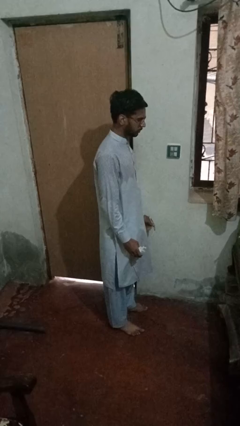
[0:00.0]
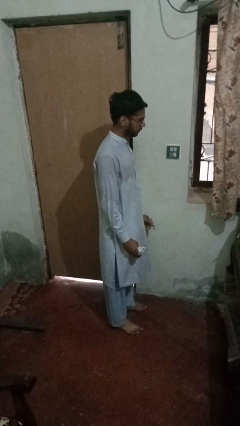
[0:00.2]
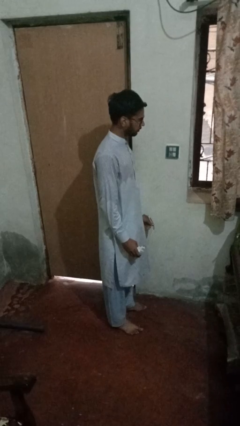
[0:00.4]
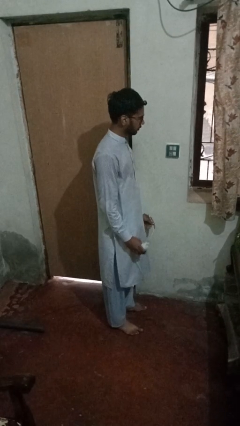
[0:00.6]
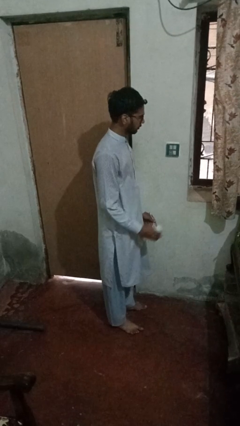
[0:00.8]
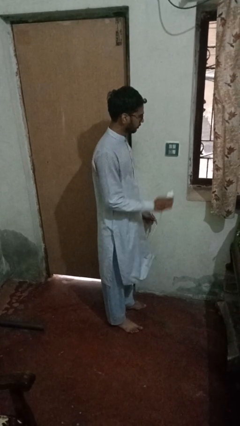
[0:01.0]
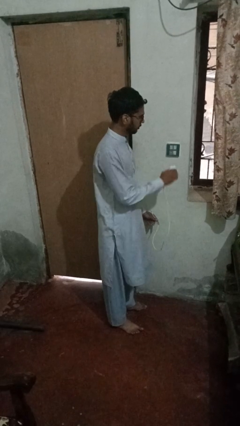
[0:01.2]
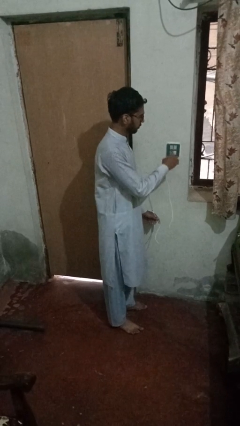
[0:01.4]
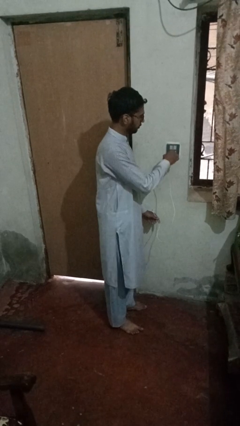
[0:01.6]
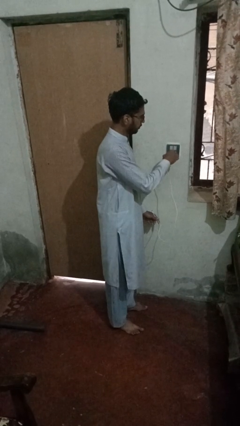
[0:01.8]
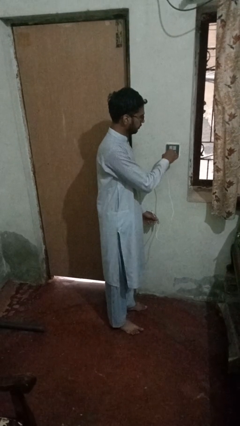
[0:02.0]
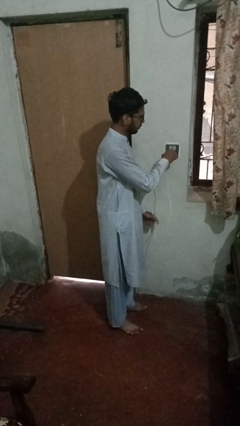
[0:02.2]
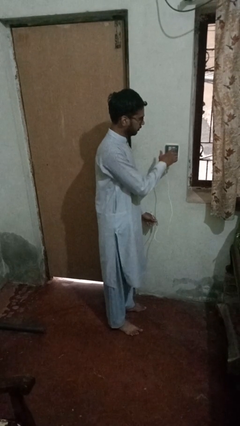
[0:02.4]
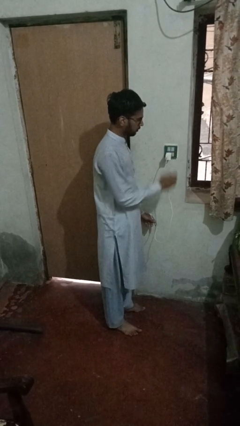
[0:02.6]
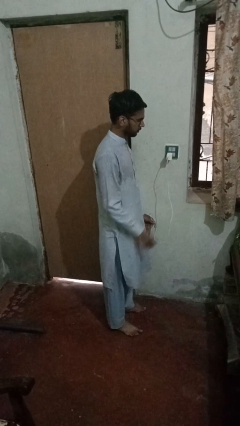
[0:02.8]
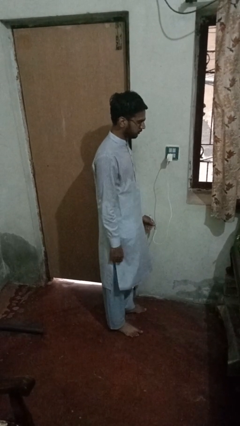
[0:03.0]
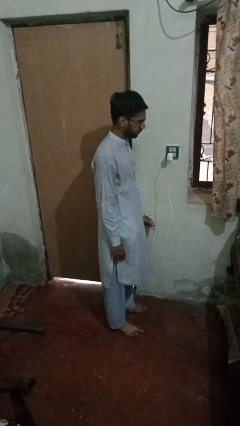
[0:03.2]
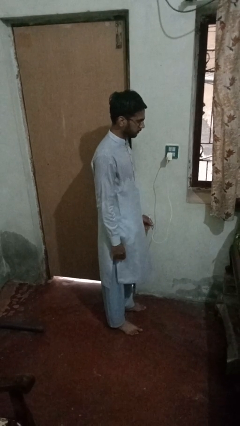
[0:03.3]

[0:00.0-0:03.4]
person plugs into electrical socket

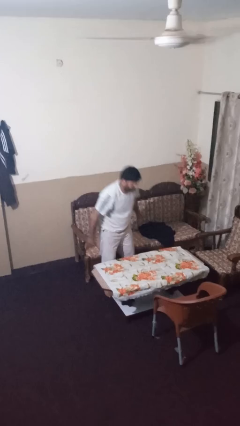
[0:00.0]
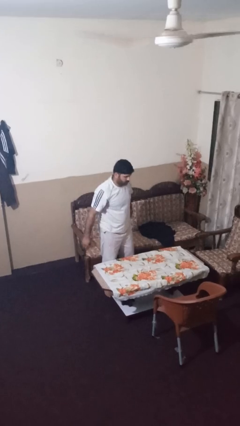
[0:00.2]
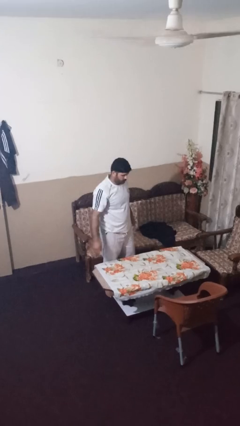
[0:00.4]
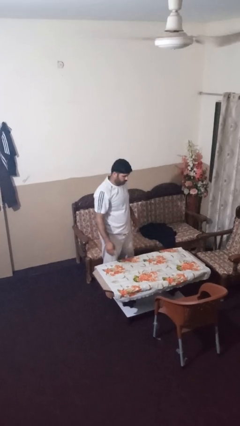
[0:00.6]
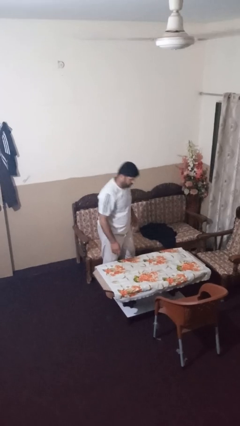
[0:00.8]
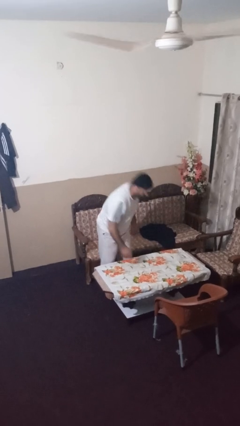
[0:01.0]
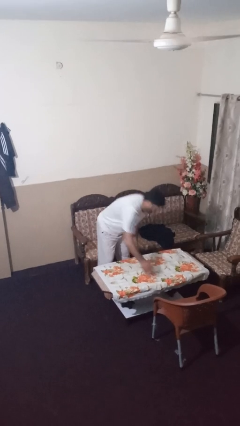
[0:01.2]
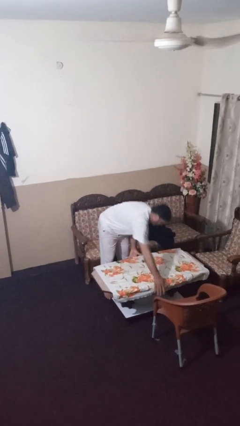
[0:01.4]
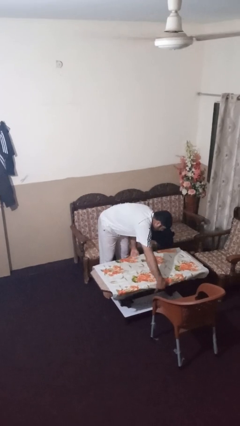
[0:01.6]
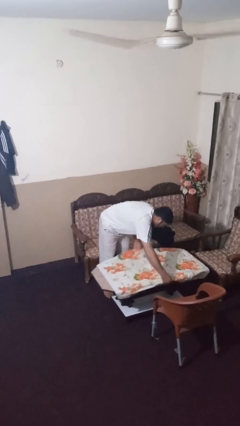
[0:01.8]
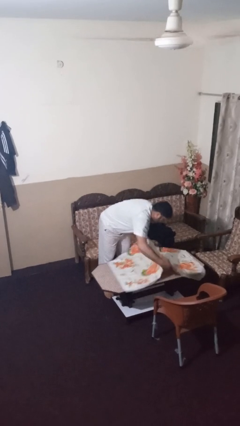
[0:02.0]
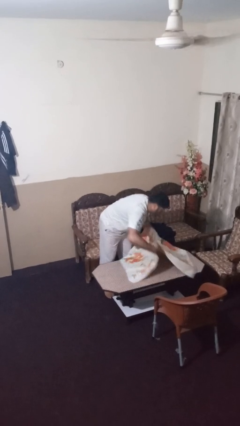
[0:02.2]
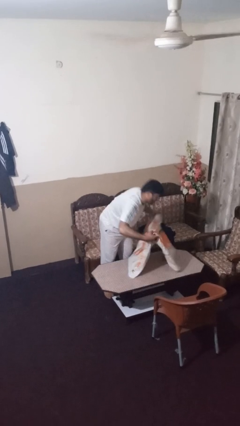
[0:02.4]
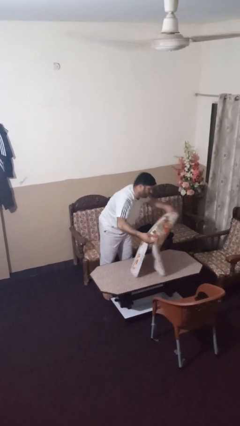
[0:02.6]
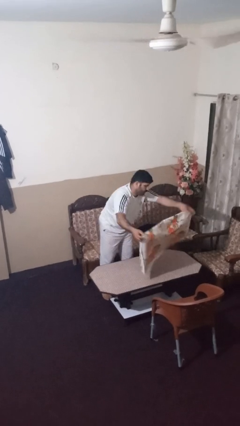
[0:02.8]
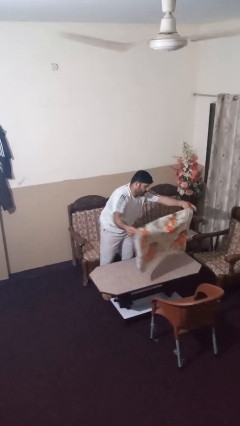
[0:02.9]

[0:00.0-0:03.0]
person folds tablecloth

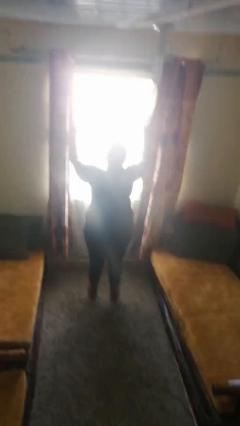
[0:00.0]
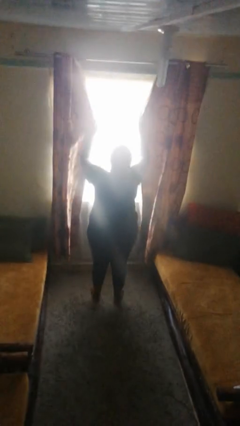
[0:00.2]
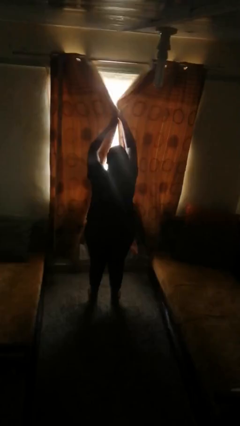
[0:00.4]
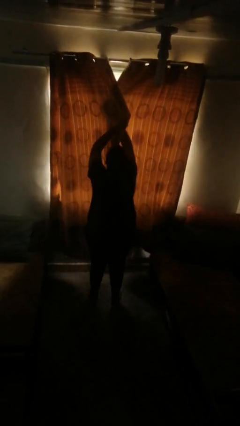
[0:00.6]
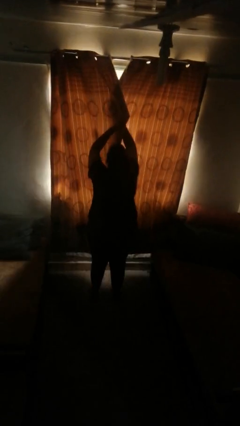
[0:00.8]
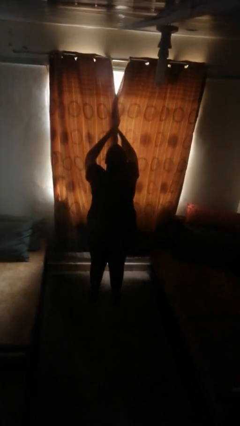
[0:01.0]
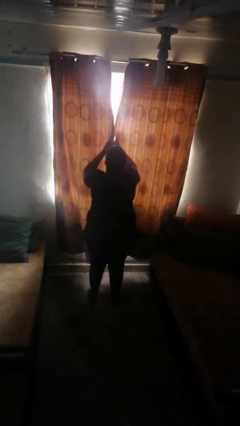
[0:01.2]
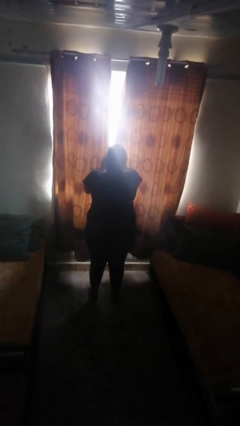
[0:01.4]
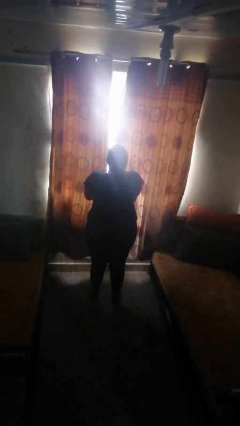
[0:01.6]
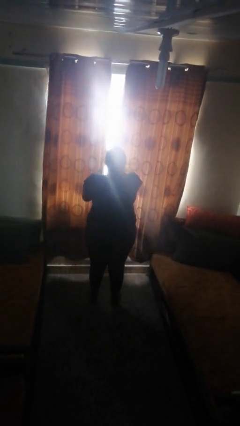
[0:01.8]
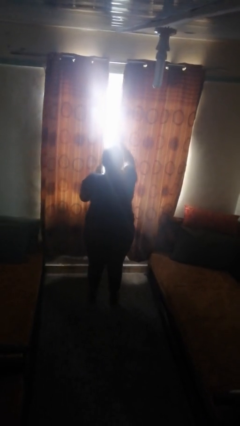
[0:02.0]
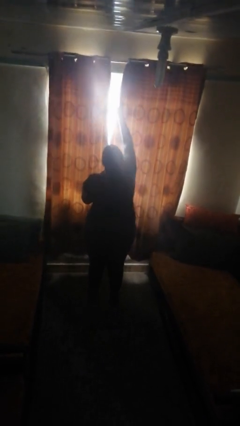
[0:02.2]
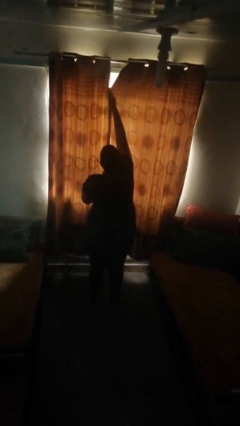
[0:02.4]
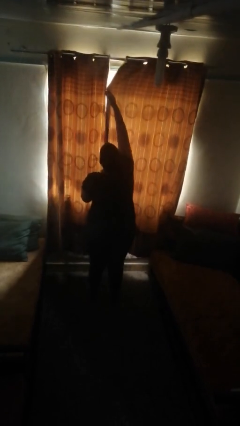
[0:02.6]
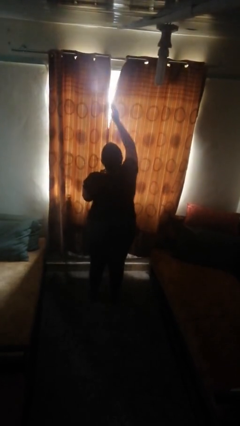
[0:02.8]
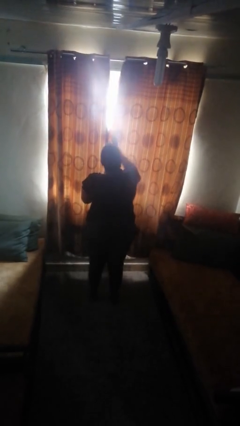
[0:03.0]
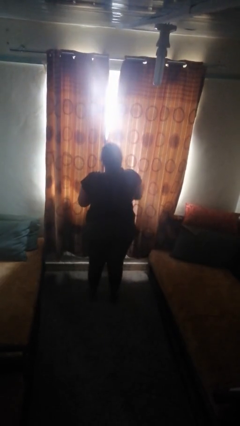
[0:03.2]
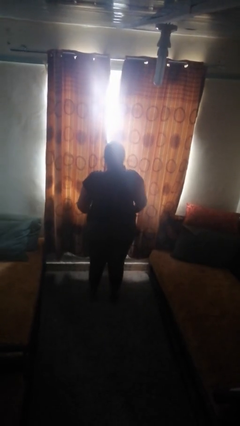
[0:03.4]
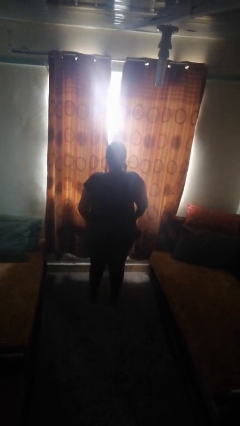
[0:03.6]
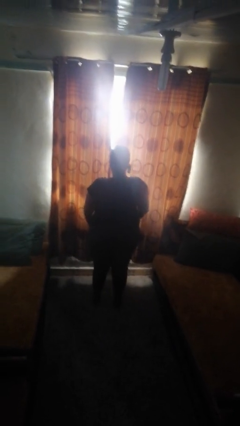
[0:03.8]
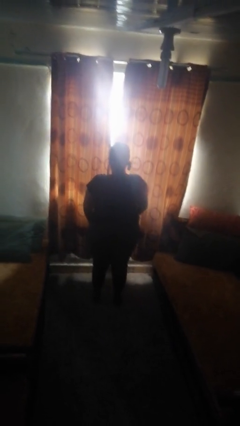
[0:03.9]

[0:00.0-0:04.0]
person closes curtains

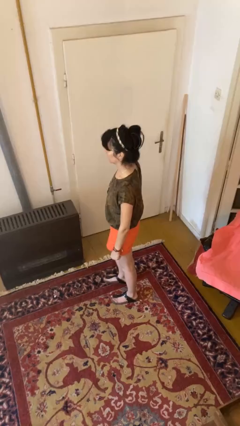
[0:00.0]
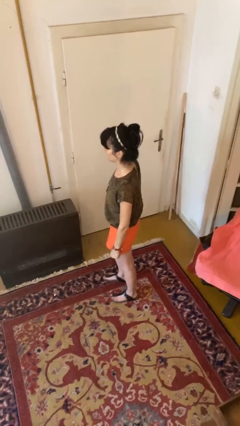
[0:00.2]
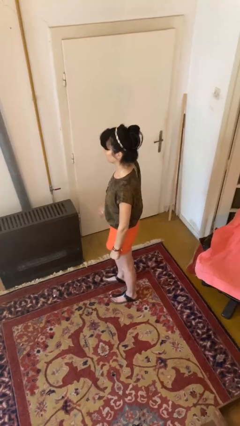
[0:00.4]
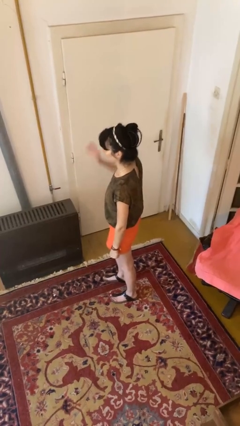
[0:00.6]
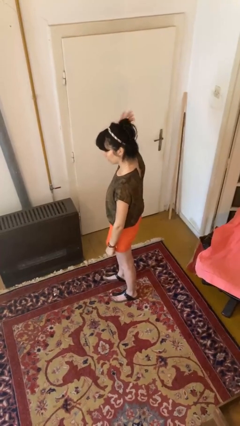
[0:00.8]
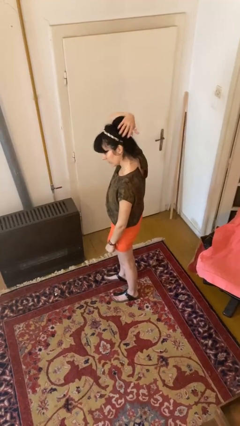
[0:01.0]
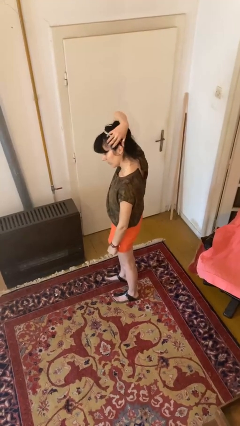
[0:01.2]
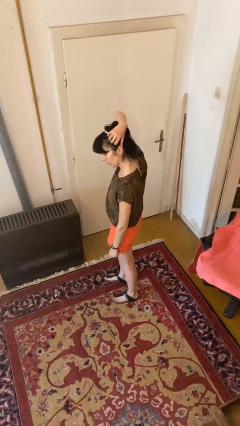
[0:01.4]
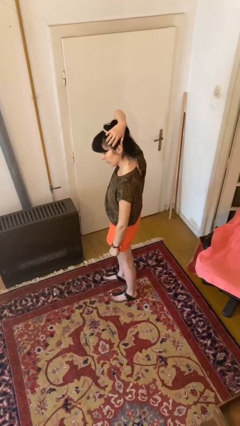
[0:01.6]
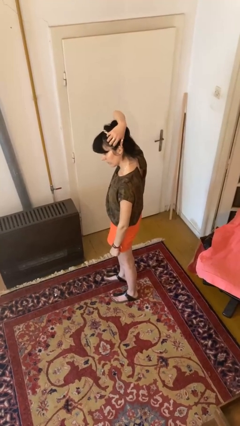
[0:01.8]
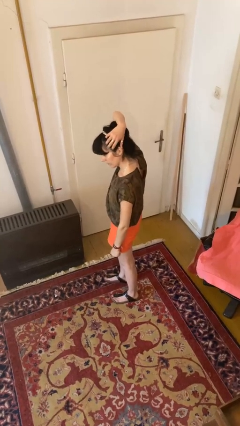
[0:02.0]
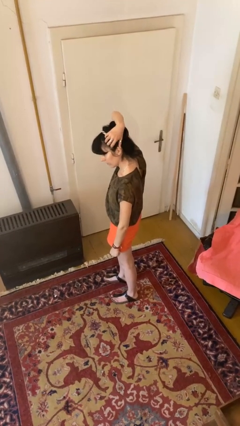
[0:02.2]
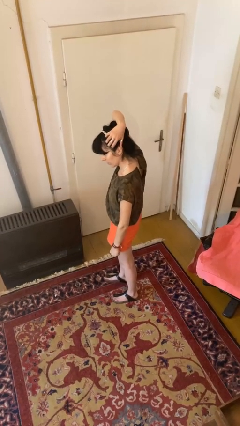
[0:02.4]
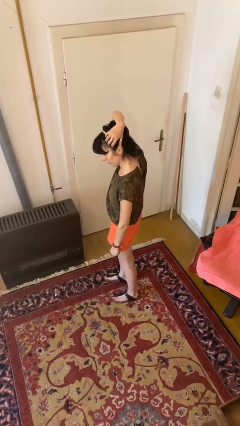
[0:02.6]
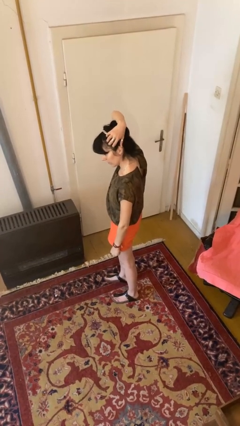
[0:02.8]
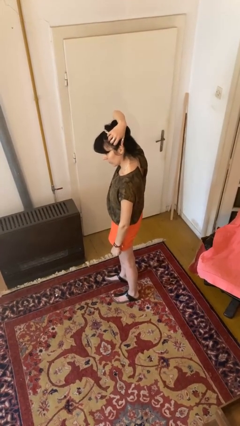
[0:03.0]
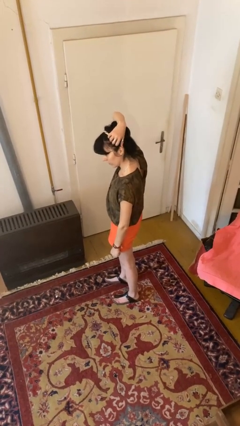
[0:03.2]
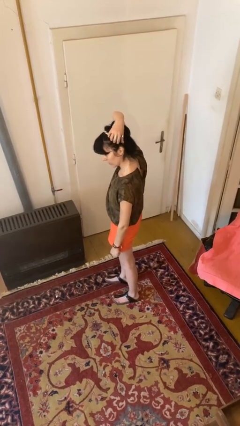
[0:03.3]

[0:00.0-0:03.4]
person scratches face

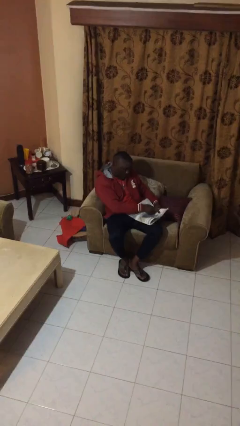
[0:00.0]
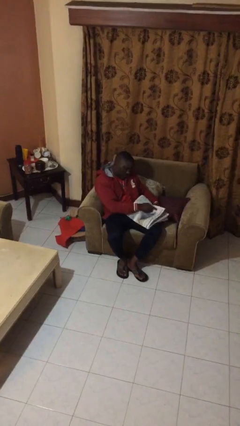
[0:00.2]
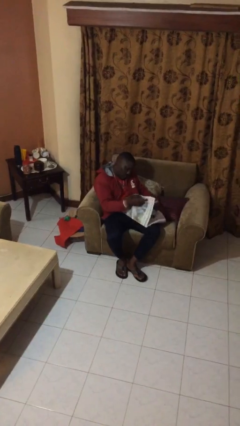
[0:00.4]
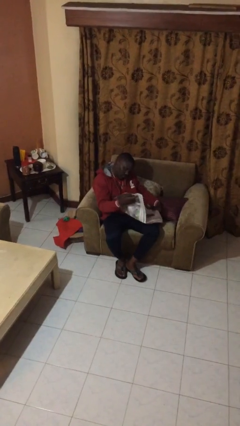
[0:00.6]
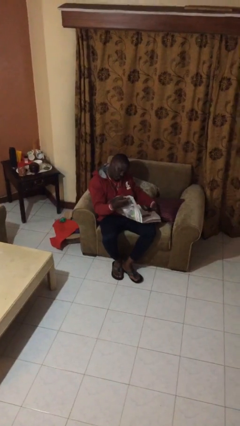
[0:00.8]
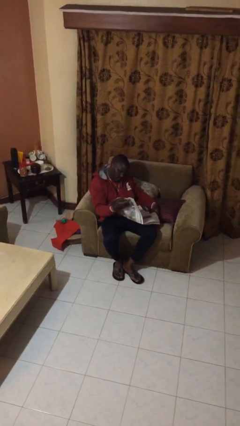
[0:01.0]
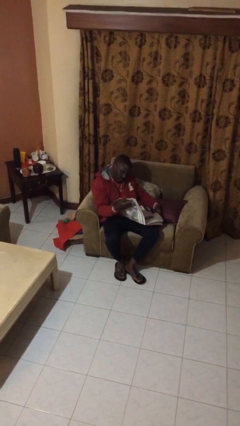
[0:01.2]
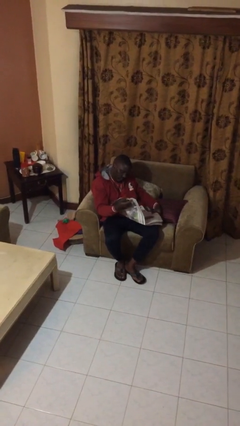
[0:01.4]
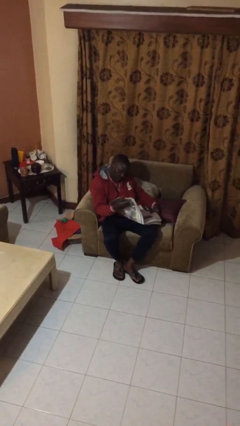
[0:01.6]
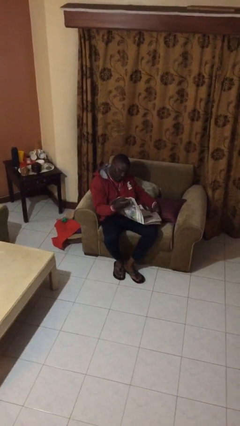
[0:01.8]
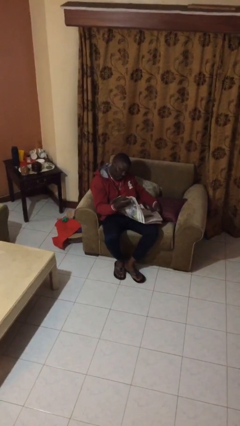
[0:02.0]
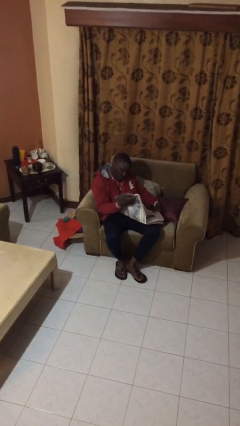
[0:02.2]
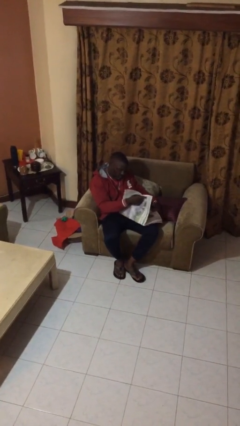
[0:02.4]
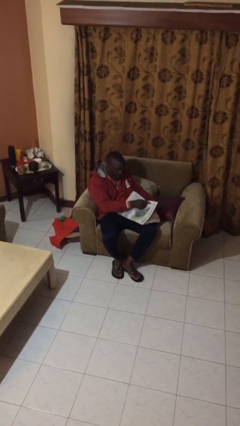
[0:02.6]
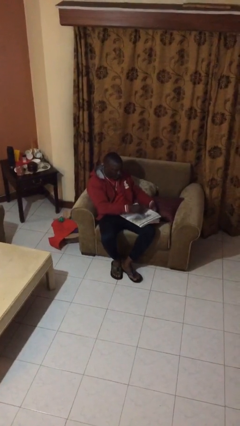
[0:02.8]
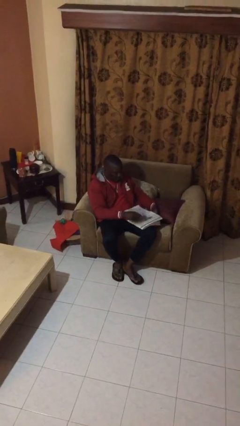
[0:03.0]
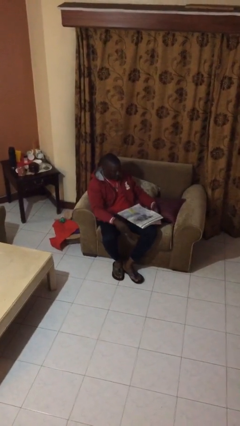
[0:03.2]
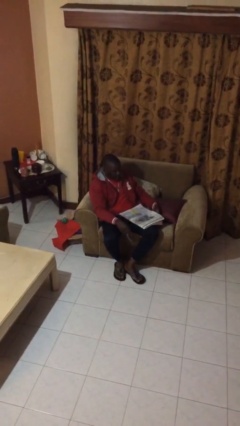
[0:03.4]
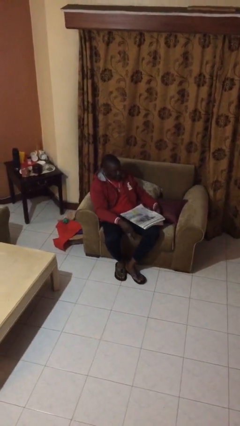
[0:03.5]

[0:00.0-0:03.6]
person reads newspaper
